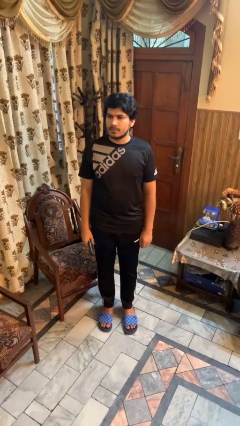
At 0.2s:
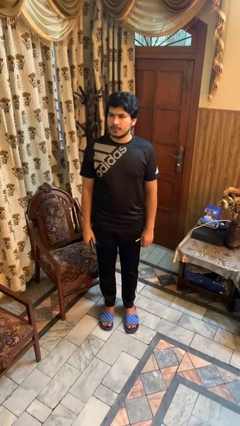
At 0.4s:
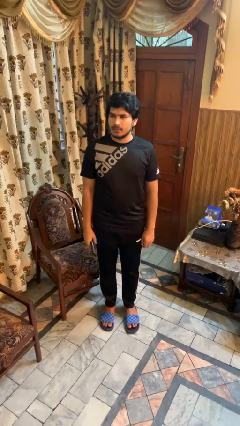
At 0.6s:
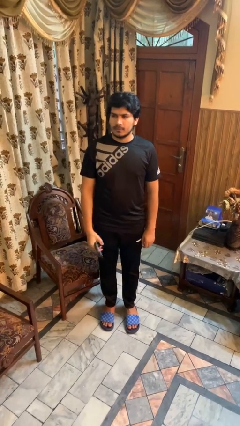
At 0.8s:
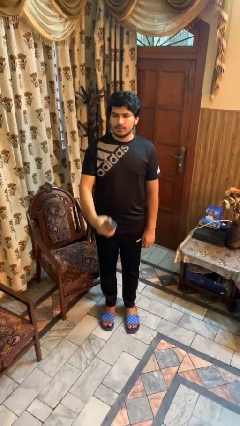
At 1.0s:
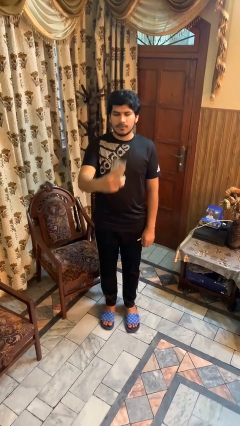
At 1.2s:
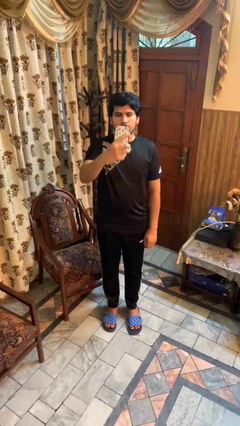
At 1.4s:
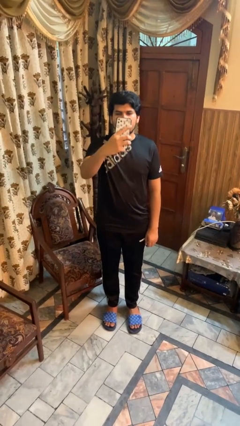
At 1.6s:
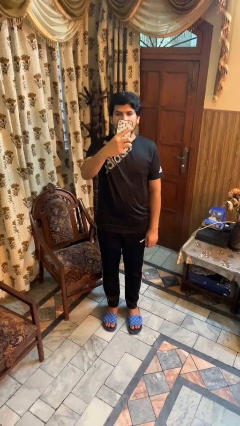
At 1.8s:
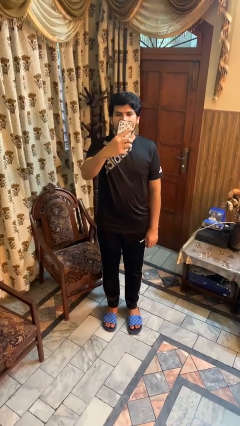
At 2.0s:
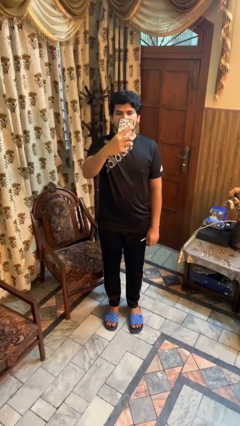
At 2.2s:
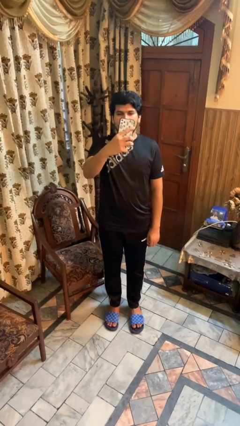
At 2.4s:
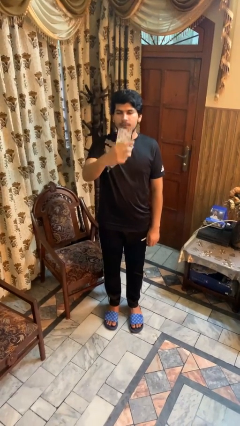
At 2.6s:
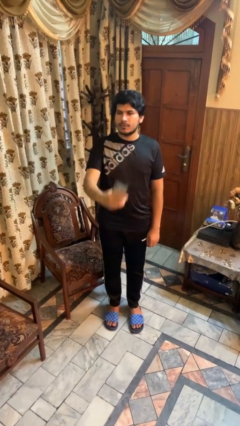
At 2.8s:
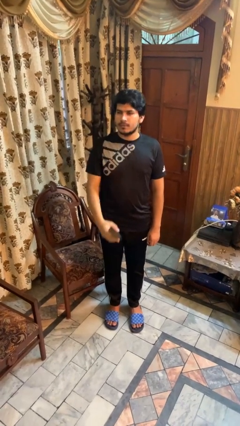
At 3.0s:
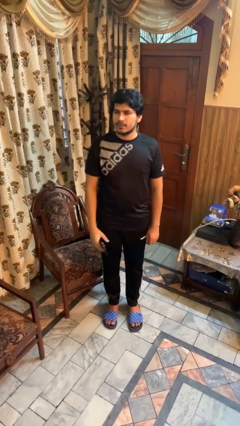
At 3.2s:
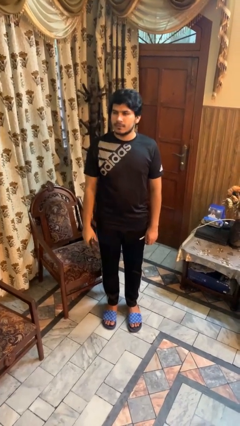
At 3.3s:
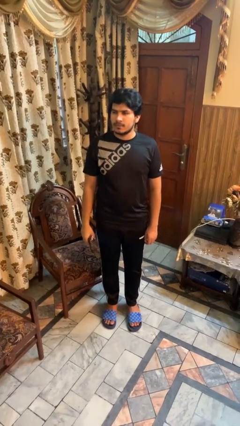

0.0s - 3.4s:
person takes selfie

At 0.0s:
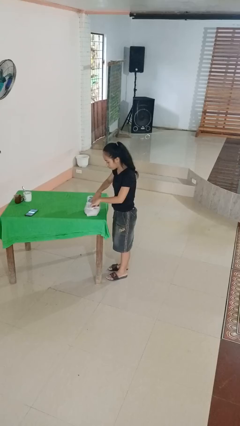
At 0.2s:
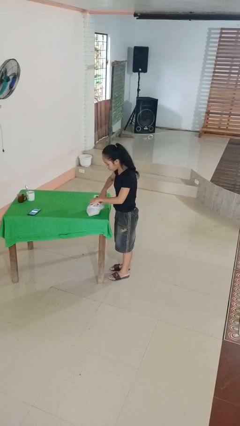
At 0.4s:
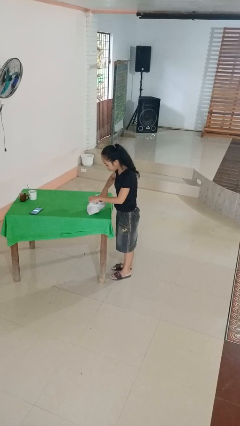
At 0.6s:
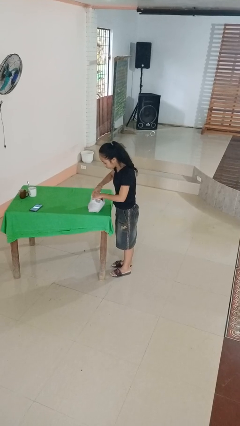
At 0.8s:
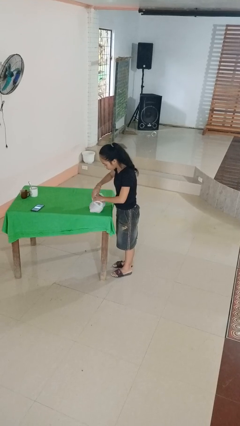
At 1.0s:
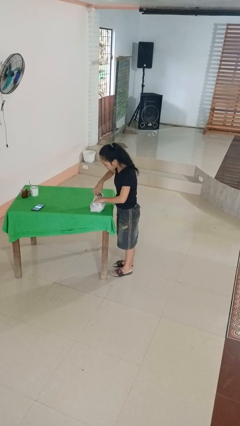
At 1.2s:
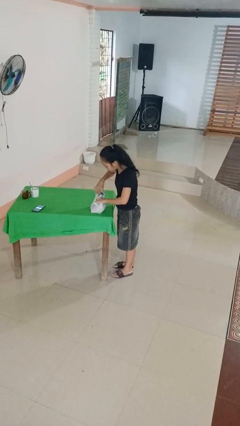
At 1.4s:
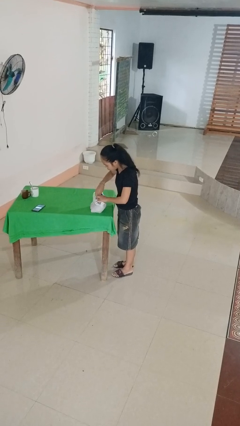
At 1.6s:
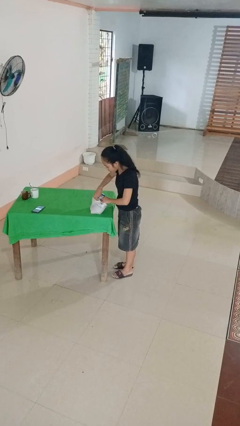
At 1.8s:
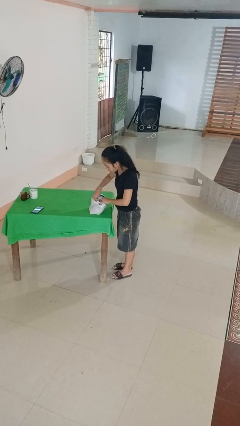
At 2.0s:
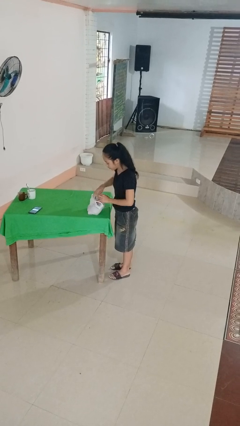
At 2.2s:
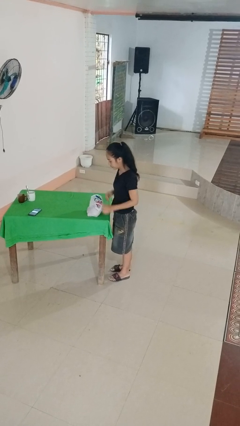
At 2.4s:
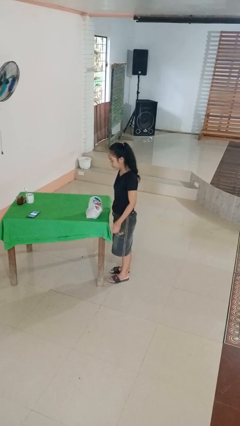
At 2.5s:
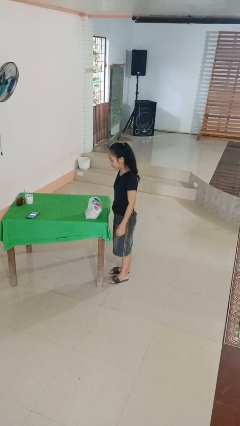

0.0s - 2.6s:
person searches in bag

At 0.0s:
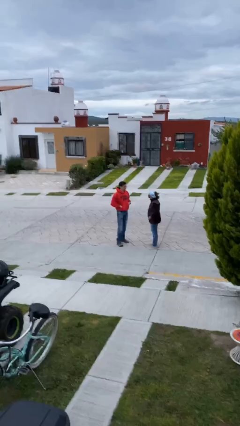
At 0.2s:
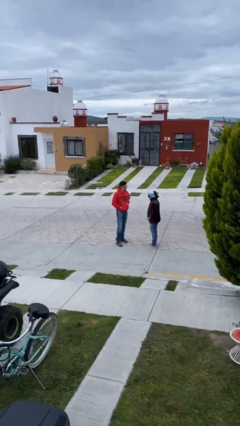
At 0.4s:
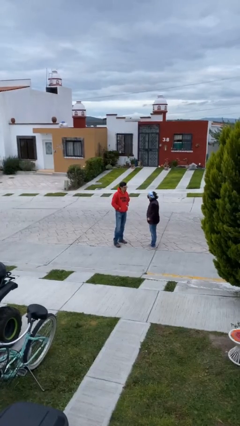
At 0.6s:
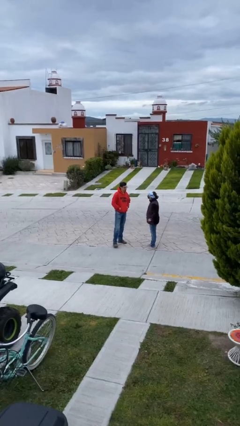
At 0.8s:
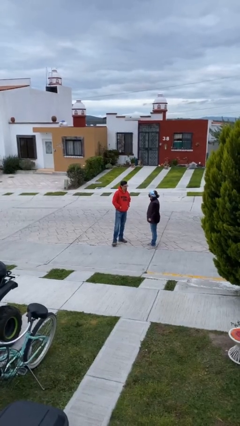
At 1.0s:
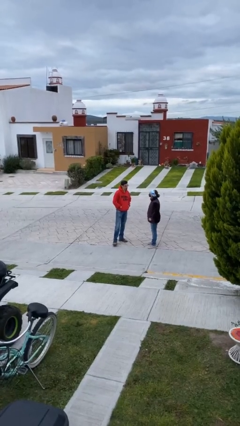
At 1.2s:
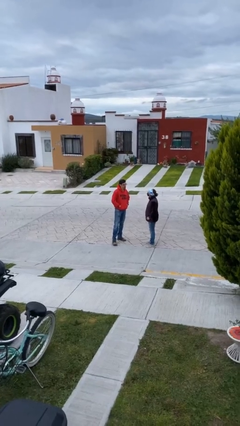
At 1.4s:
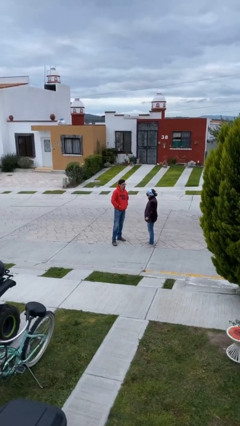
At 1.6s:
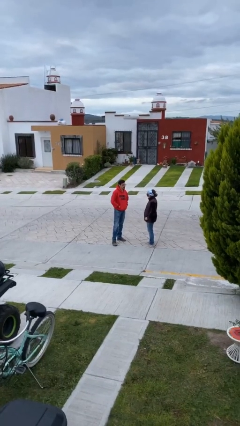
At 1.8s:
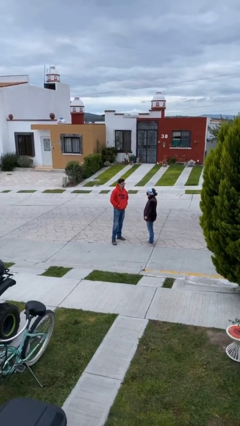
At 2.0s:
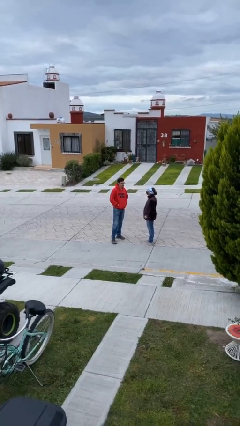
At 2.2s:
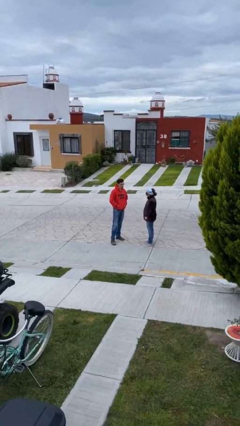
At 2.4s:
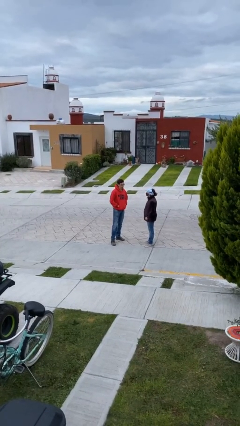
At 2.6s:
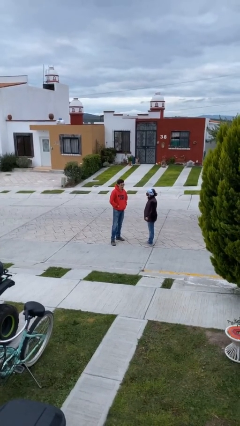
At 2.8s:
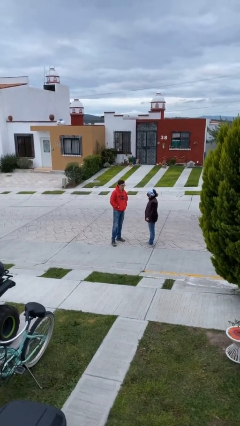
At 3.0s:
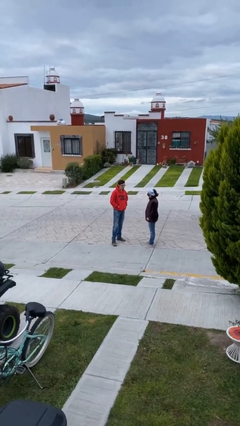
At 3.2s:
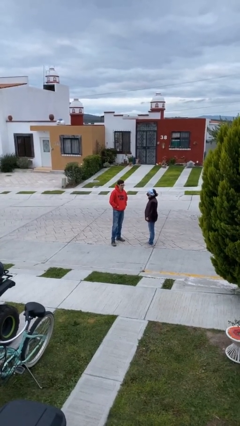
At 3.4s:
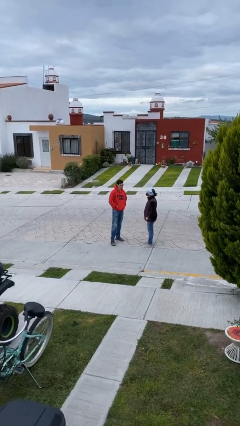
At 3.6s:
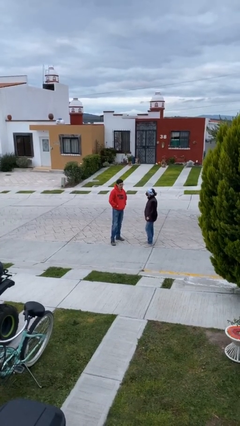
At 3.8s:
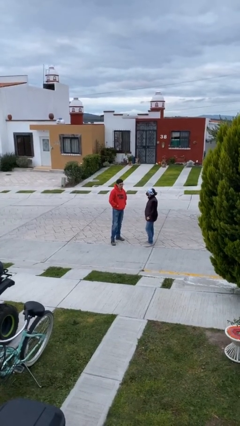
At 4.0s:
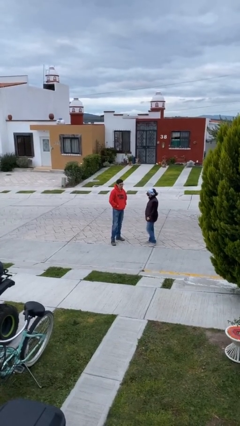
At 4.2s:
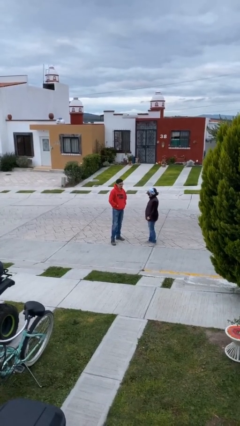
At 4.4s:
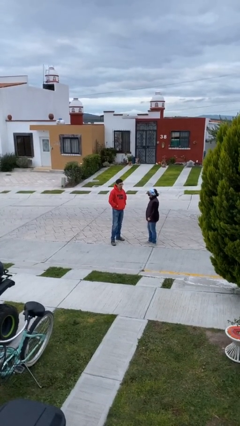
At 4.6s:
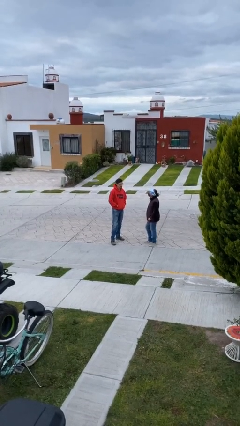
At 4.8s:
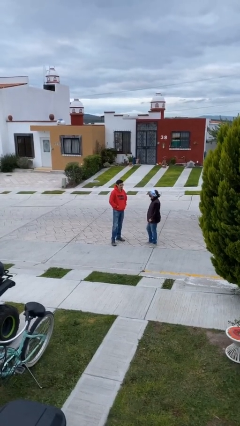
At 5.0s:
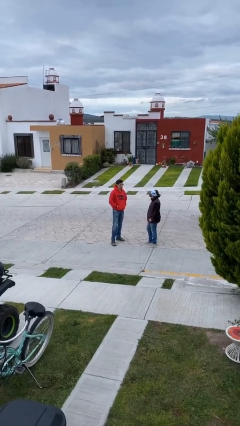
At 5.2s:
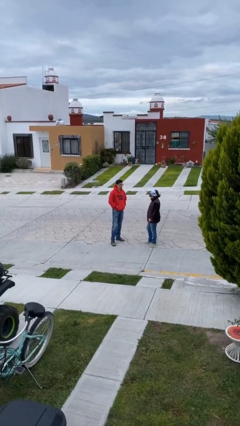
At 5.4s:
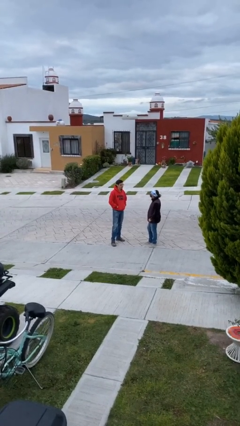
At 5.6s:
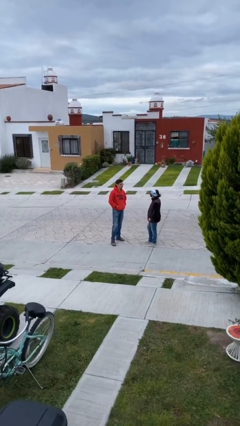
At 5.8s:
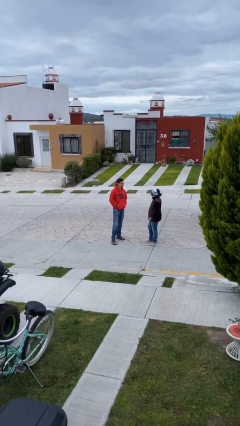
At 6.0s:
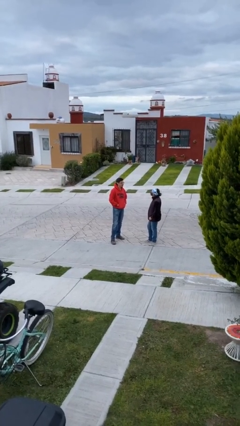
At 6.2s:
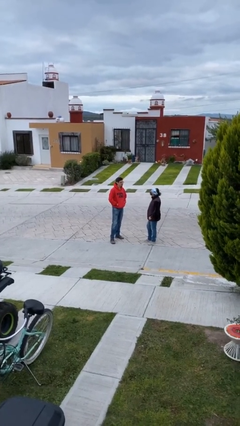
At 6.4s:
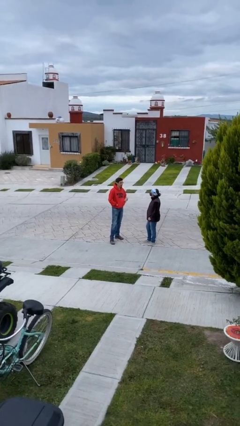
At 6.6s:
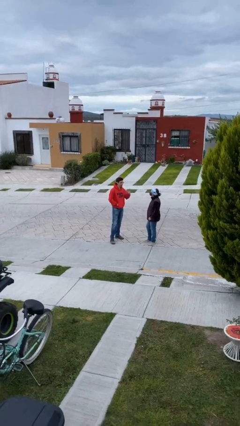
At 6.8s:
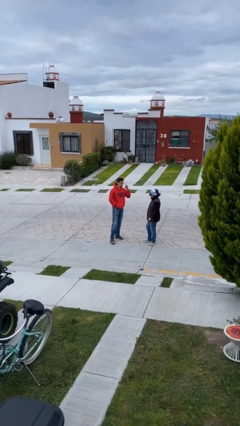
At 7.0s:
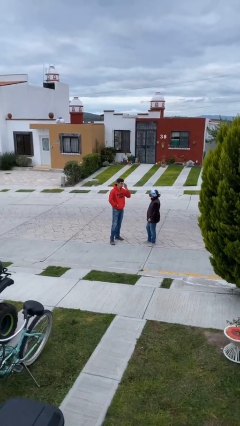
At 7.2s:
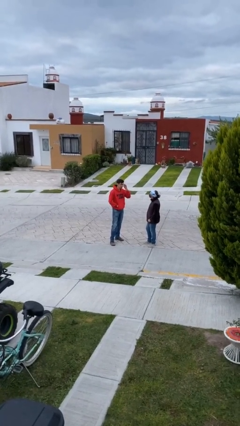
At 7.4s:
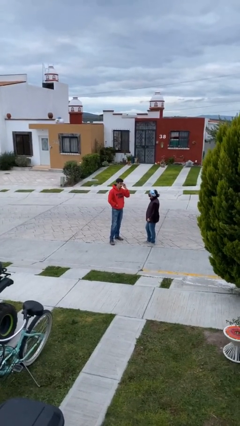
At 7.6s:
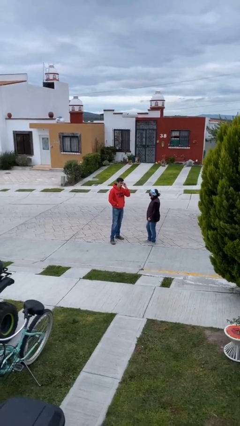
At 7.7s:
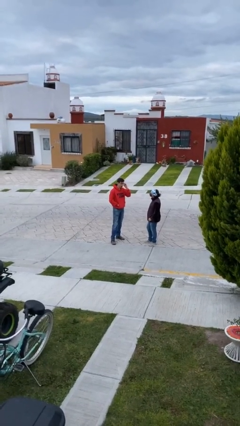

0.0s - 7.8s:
person talks to person

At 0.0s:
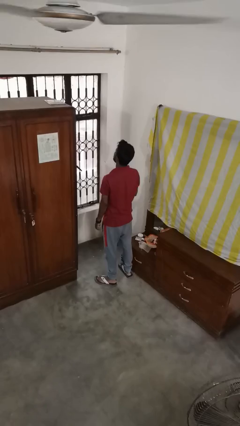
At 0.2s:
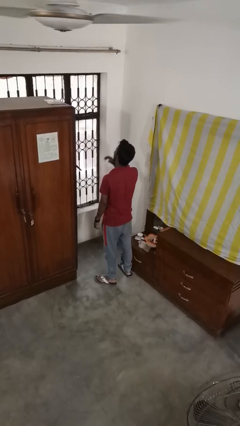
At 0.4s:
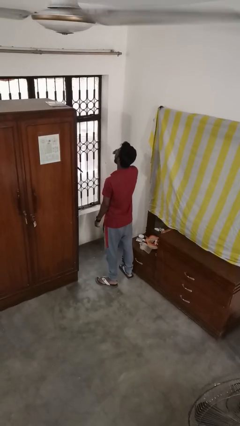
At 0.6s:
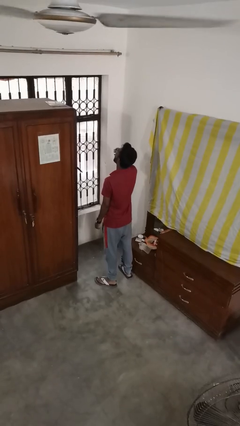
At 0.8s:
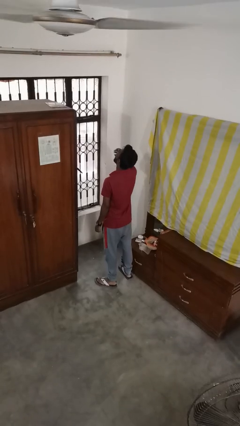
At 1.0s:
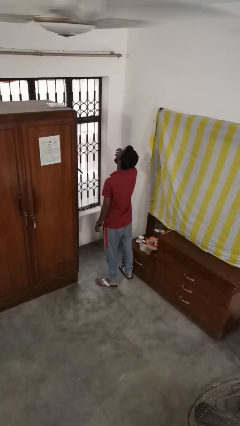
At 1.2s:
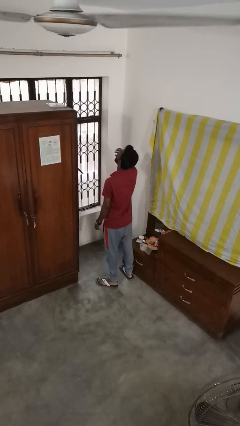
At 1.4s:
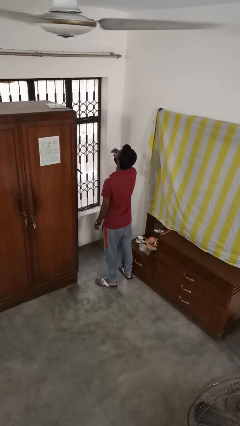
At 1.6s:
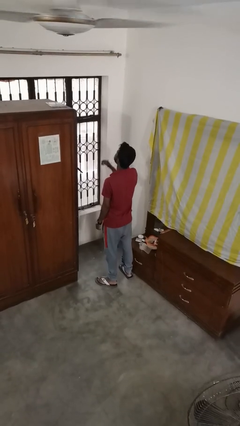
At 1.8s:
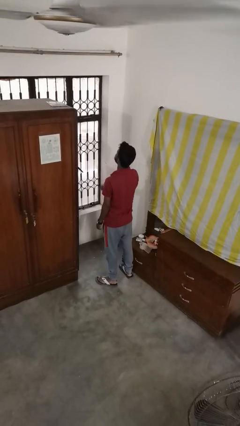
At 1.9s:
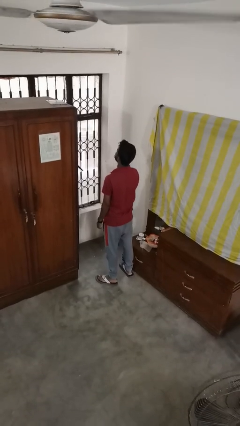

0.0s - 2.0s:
person yawns

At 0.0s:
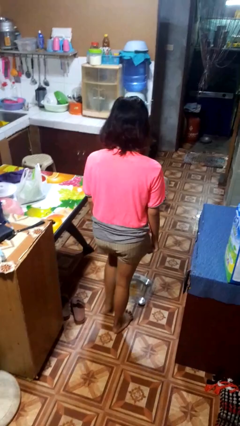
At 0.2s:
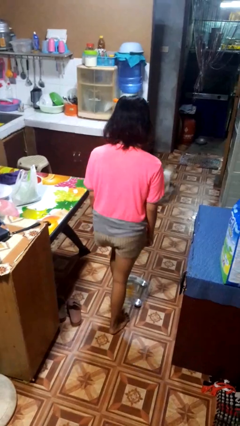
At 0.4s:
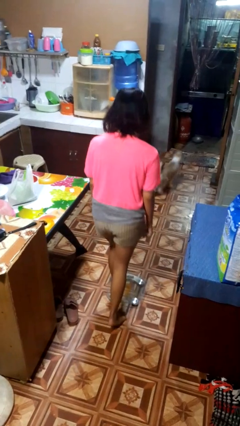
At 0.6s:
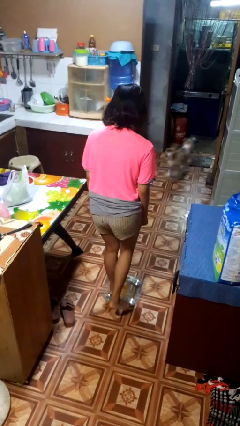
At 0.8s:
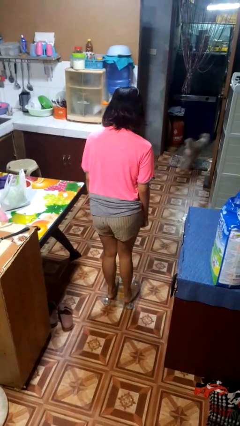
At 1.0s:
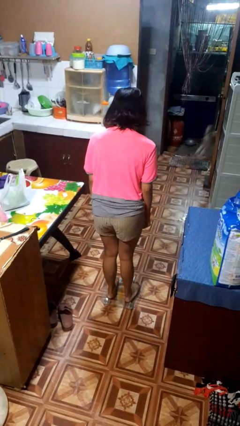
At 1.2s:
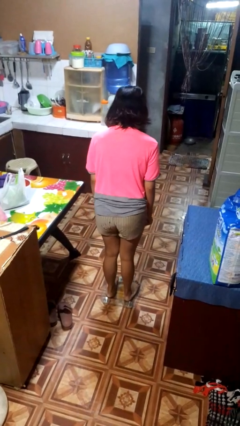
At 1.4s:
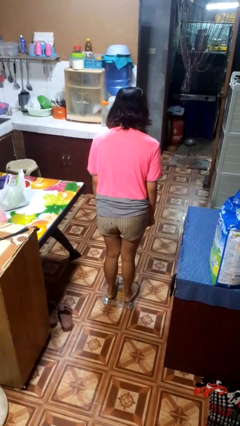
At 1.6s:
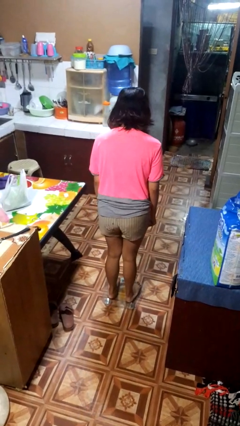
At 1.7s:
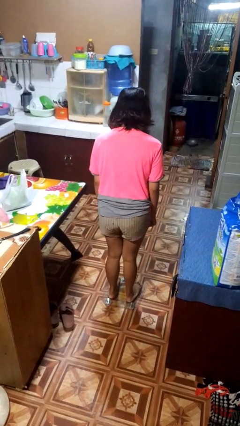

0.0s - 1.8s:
person uses bodyweight scale

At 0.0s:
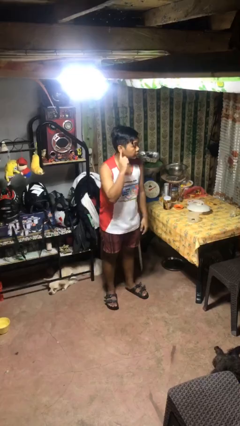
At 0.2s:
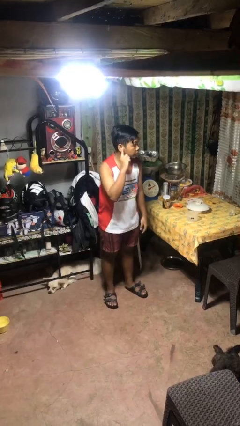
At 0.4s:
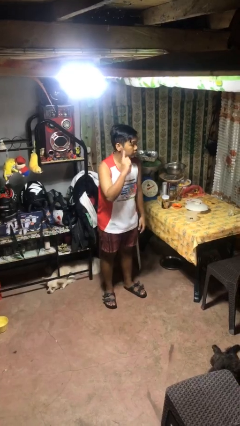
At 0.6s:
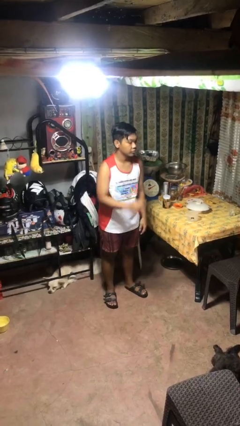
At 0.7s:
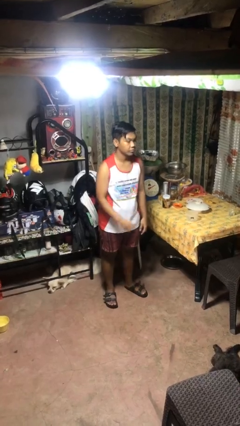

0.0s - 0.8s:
person gestures listen closely
